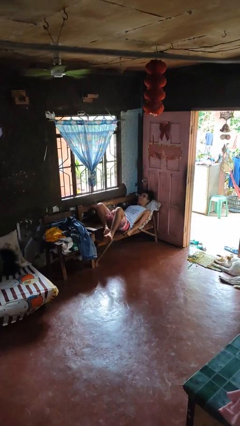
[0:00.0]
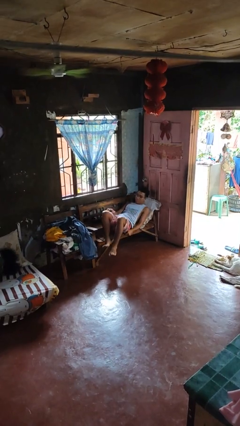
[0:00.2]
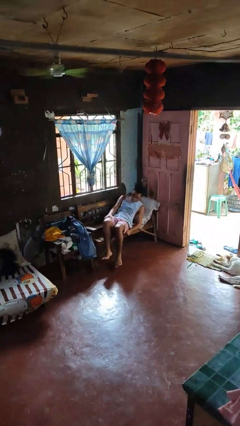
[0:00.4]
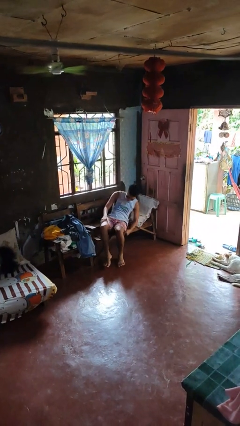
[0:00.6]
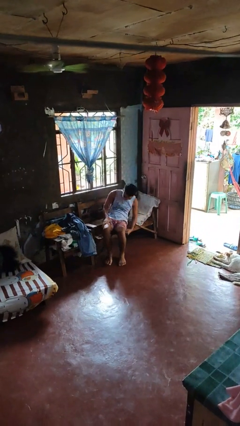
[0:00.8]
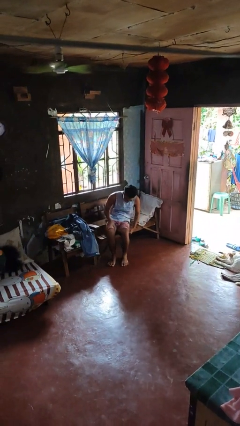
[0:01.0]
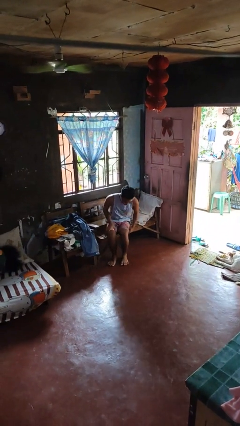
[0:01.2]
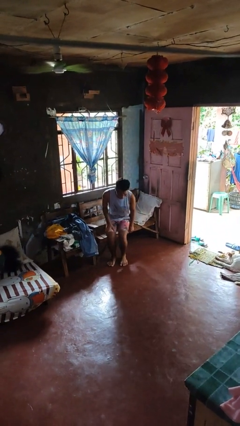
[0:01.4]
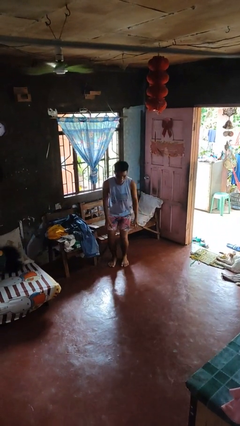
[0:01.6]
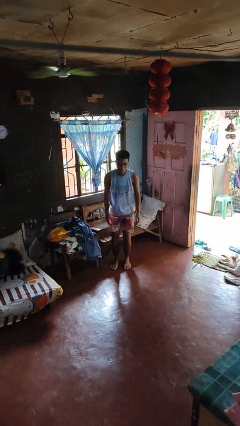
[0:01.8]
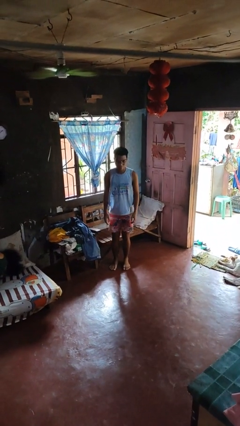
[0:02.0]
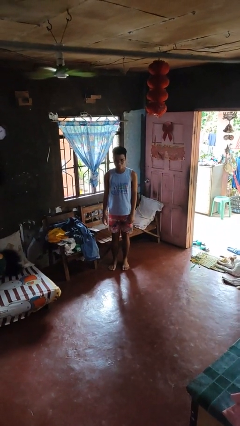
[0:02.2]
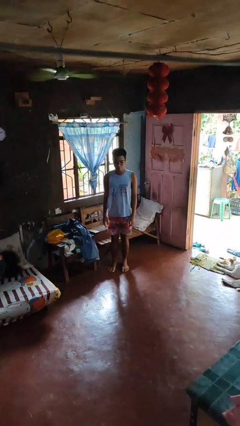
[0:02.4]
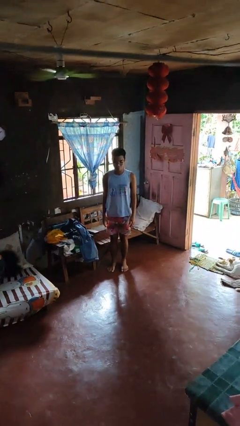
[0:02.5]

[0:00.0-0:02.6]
person stands up

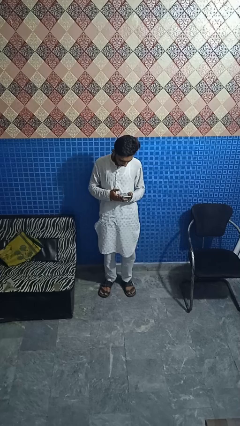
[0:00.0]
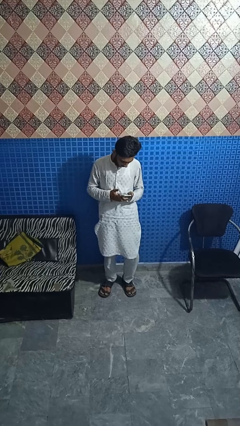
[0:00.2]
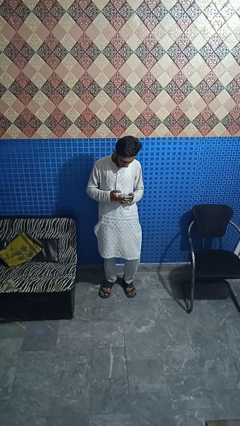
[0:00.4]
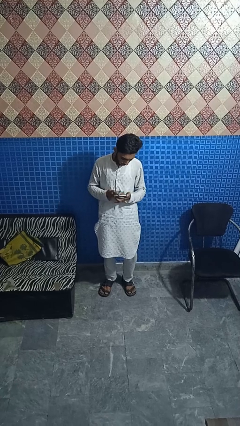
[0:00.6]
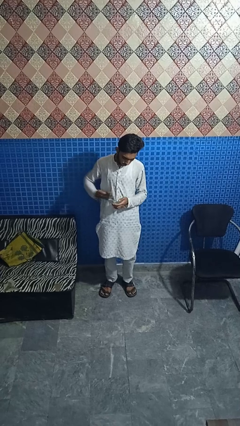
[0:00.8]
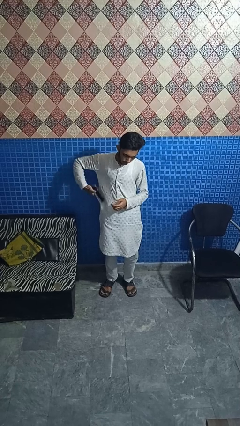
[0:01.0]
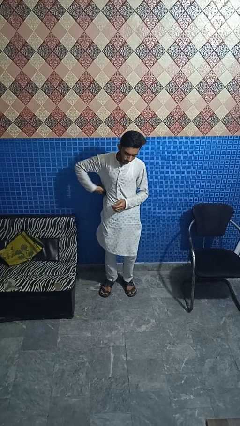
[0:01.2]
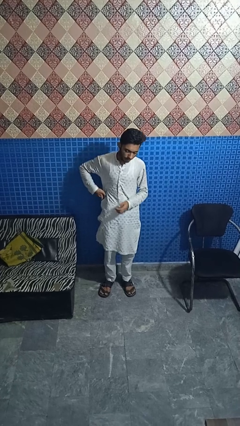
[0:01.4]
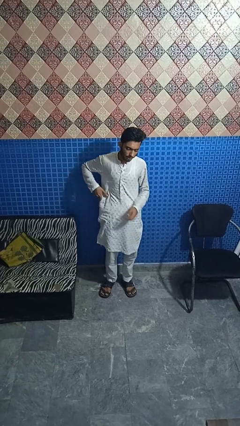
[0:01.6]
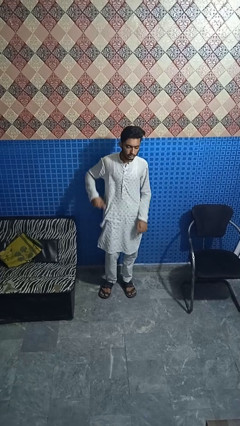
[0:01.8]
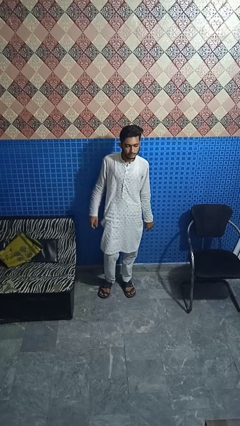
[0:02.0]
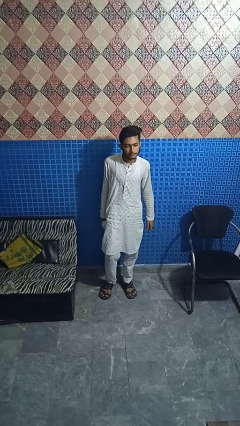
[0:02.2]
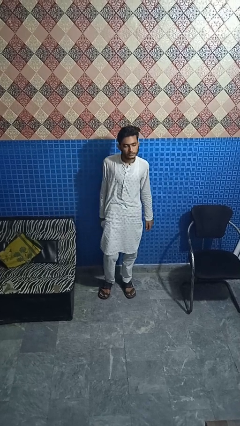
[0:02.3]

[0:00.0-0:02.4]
person puts phone into pocket

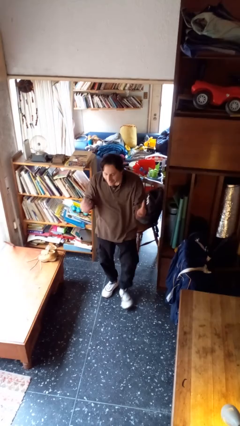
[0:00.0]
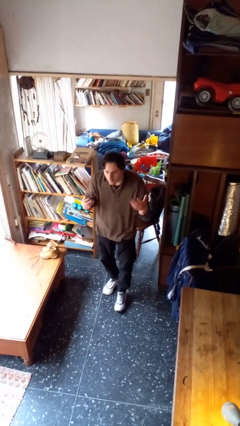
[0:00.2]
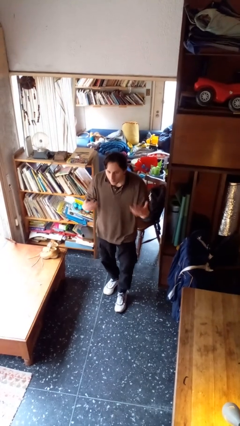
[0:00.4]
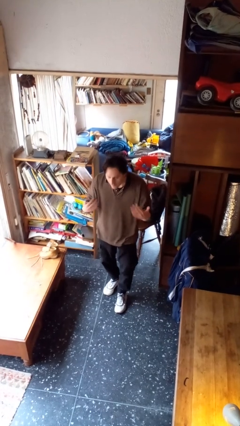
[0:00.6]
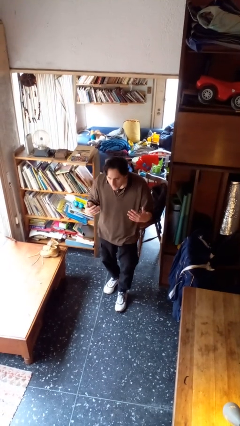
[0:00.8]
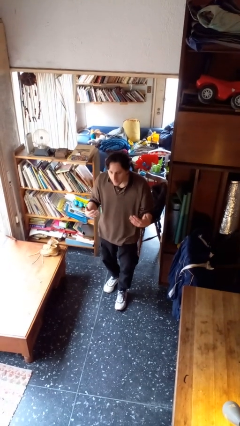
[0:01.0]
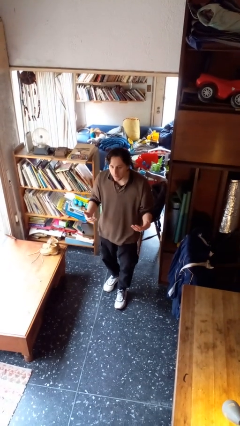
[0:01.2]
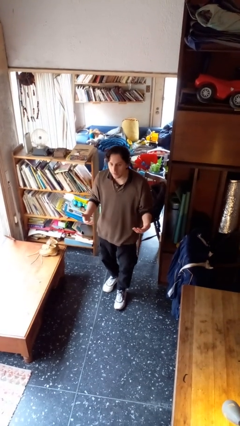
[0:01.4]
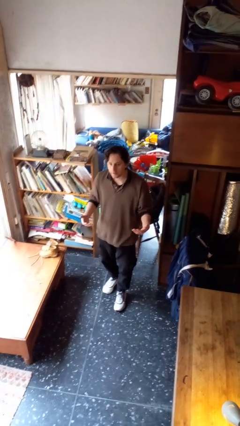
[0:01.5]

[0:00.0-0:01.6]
person gestures come here

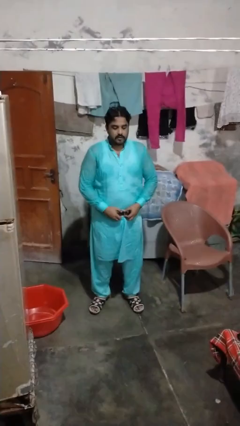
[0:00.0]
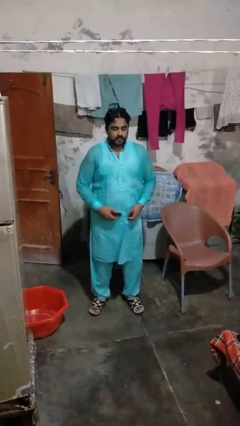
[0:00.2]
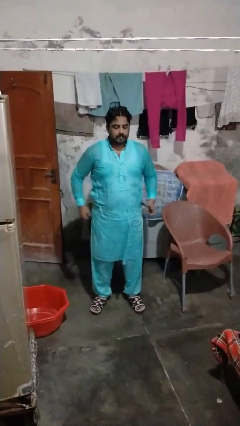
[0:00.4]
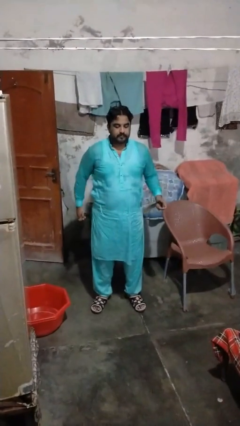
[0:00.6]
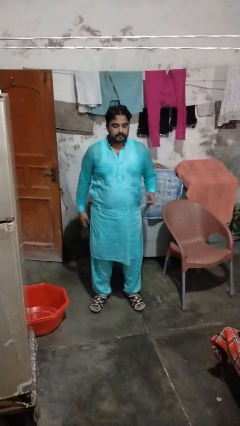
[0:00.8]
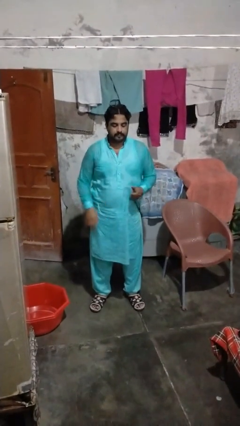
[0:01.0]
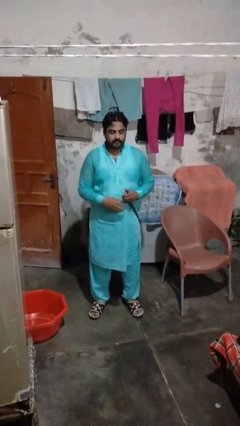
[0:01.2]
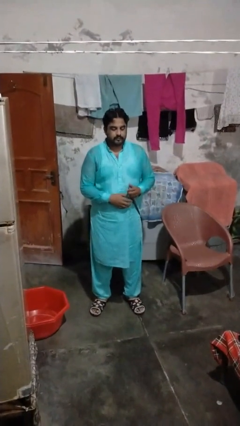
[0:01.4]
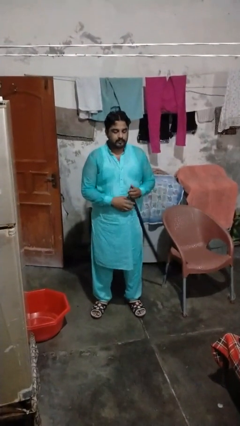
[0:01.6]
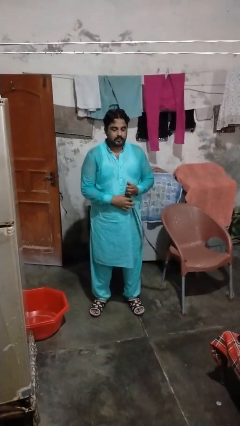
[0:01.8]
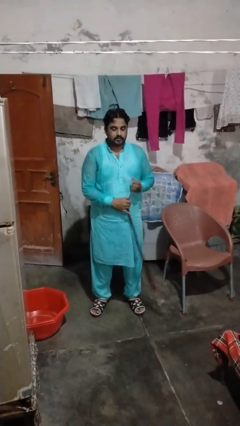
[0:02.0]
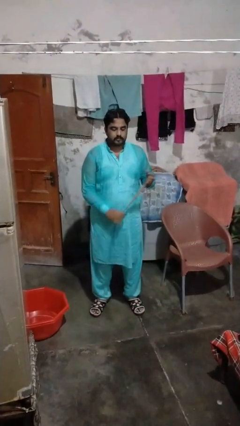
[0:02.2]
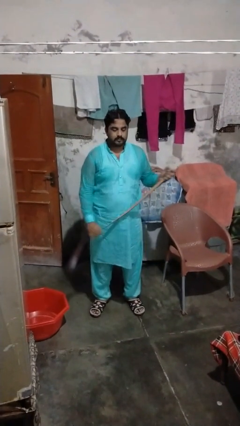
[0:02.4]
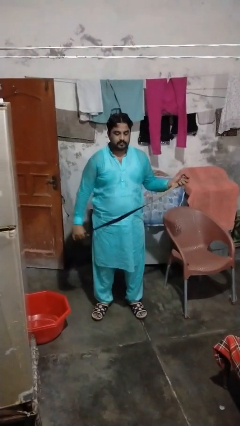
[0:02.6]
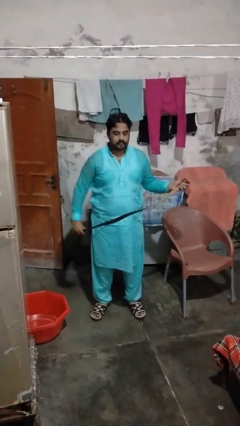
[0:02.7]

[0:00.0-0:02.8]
person takes off belt

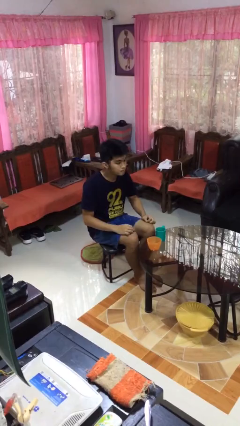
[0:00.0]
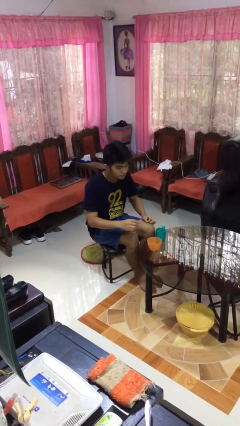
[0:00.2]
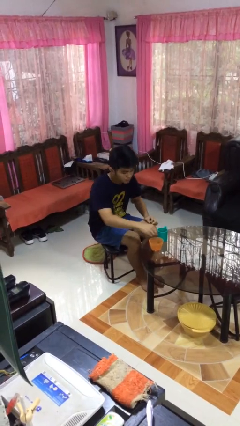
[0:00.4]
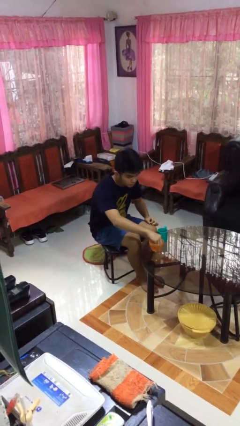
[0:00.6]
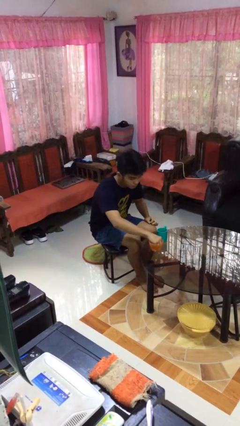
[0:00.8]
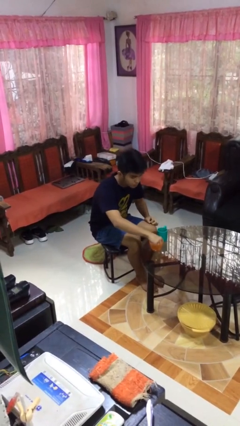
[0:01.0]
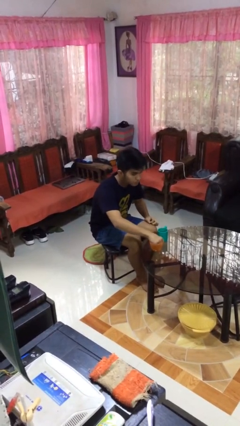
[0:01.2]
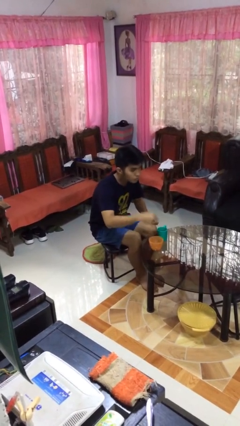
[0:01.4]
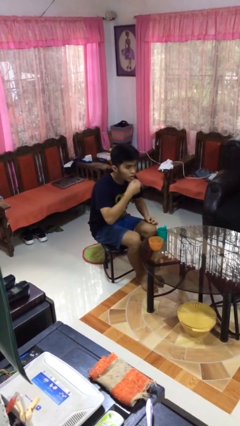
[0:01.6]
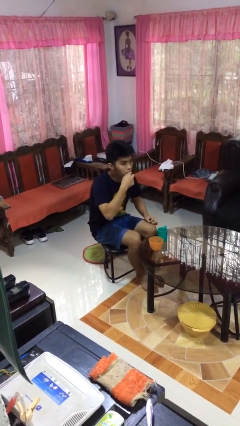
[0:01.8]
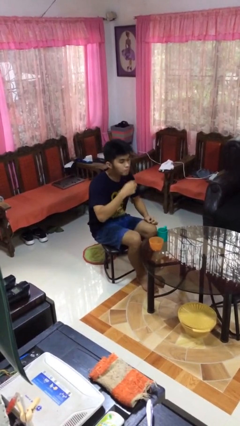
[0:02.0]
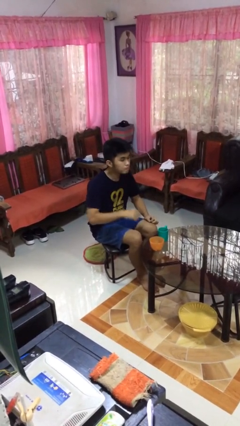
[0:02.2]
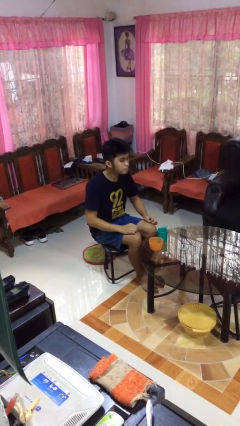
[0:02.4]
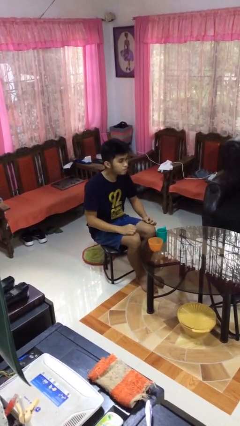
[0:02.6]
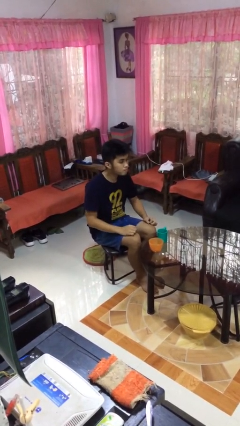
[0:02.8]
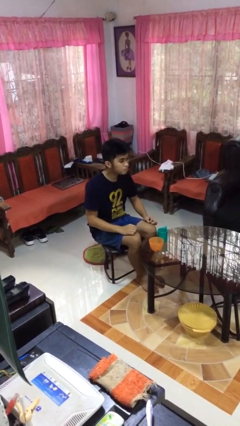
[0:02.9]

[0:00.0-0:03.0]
person takes medicine pills

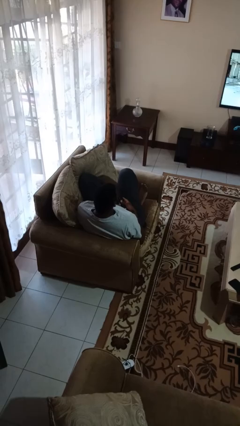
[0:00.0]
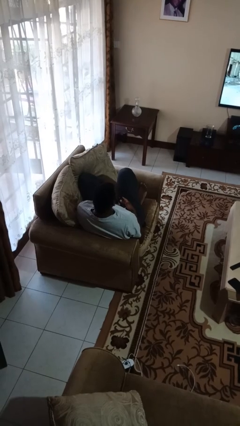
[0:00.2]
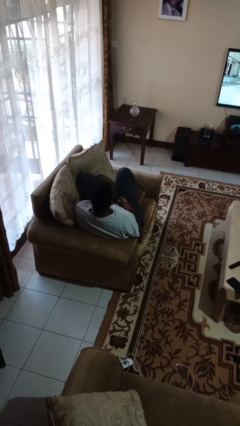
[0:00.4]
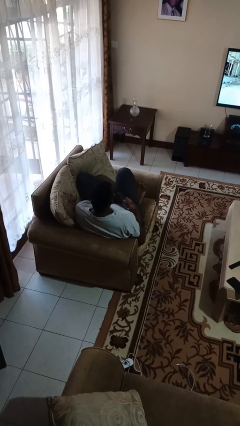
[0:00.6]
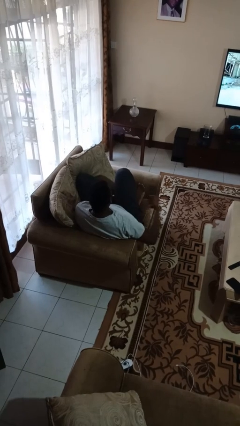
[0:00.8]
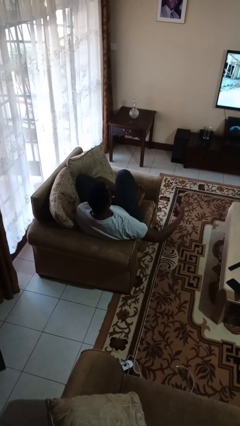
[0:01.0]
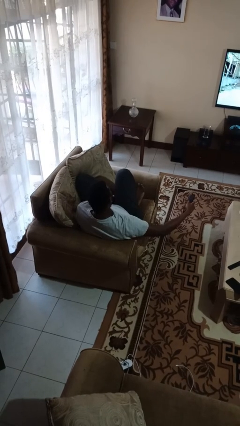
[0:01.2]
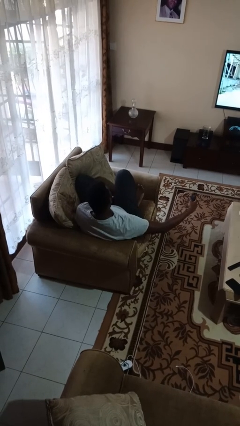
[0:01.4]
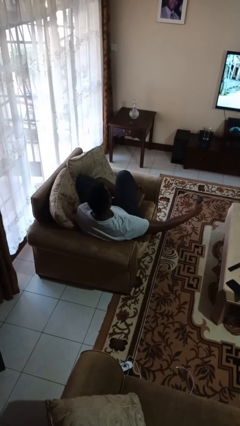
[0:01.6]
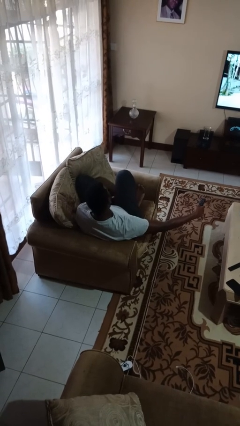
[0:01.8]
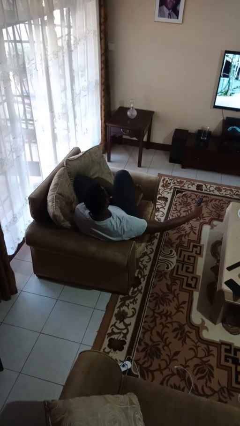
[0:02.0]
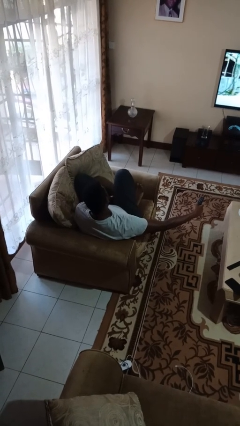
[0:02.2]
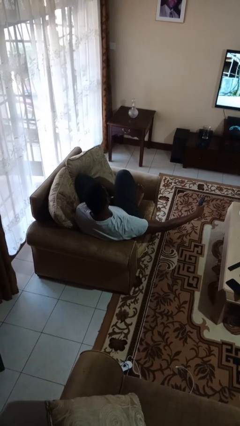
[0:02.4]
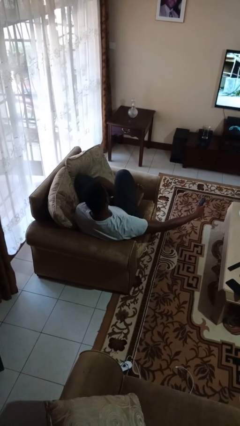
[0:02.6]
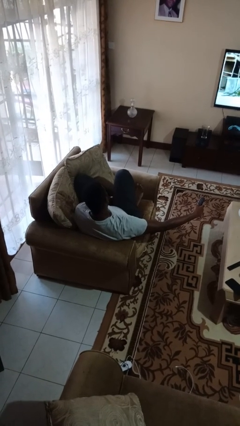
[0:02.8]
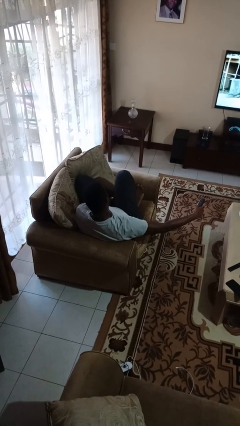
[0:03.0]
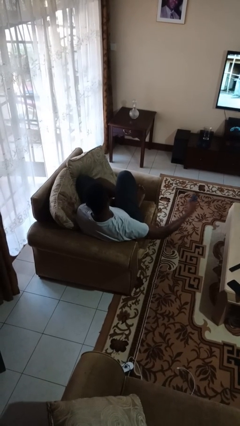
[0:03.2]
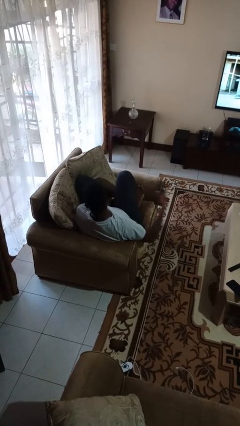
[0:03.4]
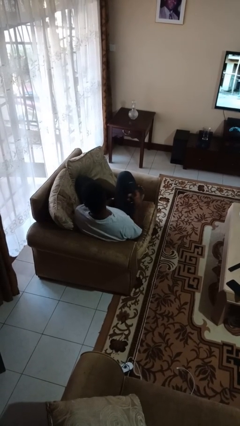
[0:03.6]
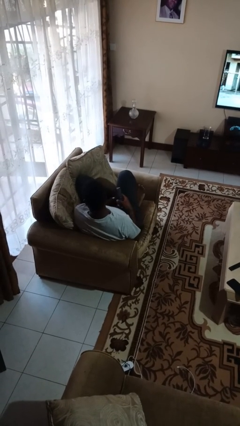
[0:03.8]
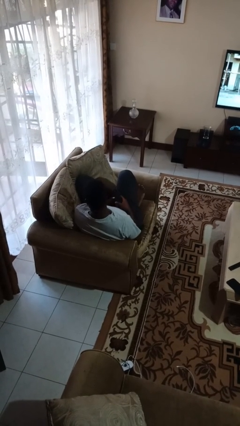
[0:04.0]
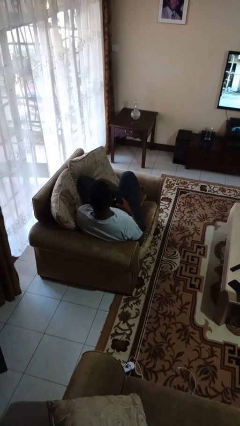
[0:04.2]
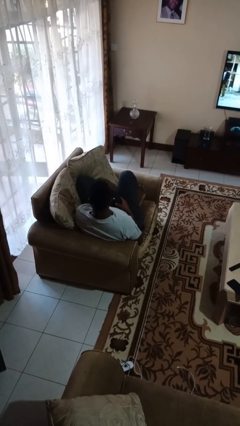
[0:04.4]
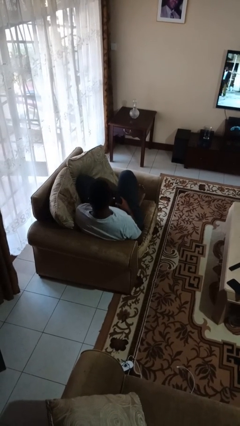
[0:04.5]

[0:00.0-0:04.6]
person uses television remote

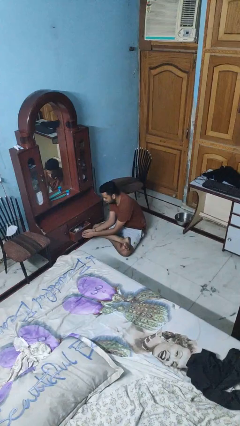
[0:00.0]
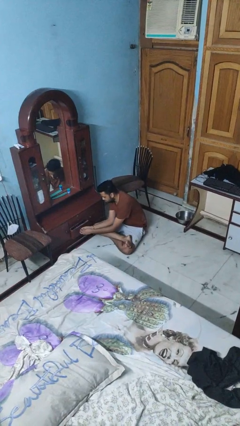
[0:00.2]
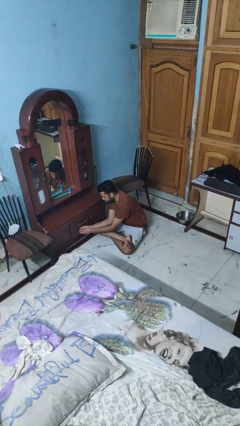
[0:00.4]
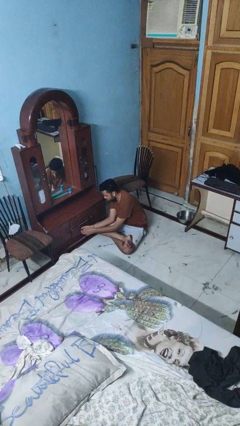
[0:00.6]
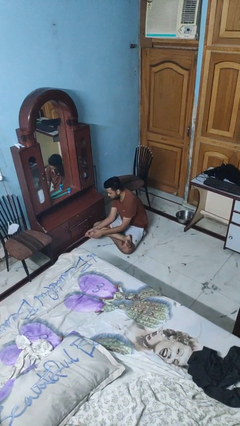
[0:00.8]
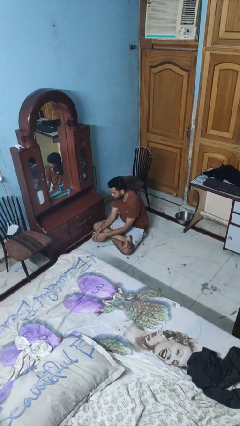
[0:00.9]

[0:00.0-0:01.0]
person closes dresser drawer
